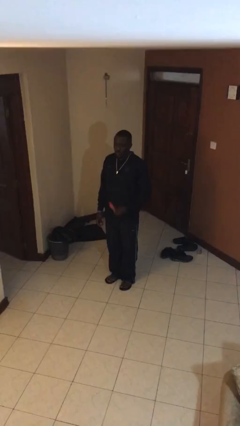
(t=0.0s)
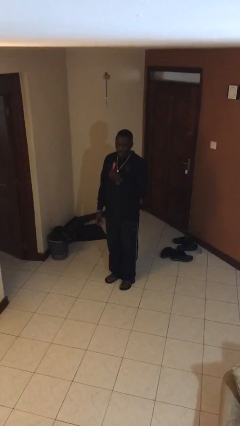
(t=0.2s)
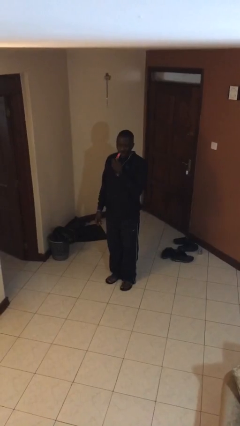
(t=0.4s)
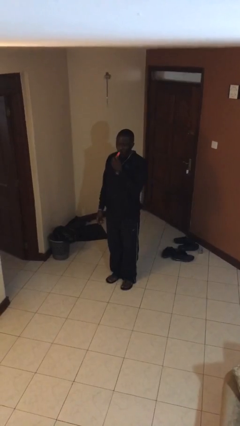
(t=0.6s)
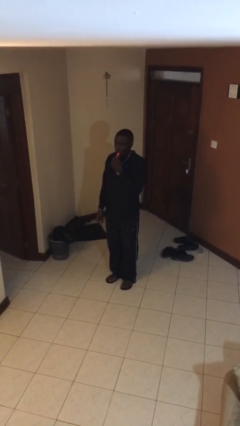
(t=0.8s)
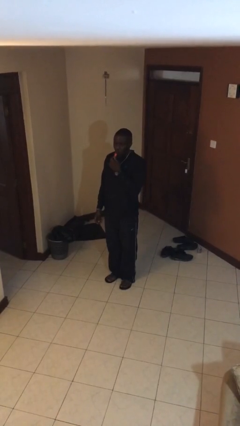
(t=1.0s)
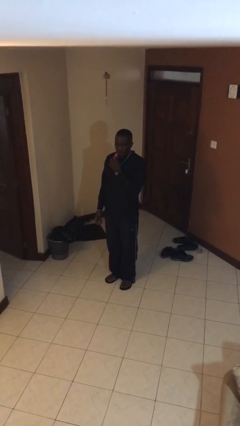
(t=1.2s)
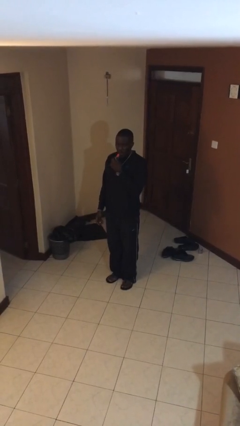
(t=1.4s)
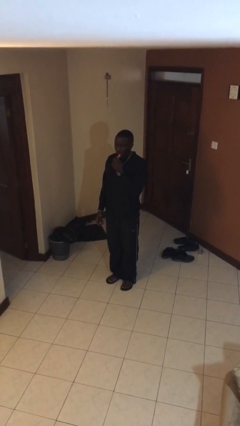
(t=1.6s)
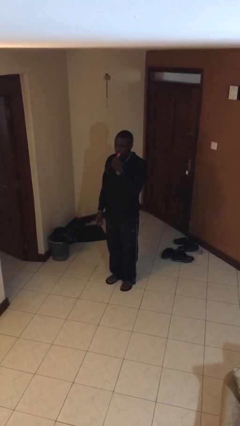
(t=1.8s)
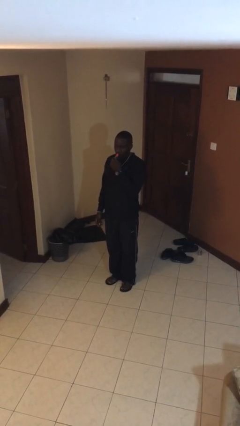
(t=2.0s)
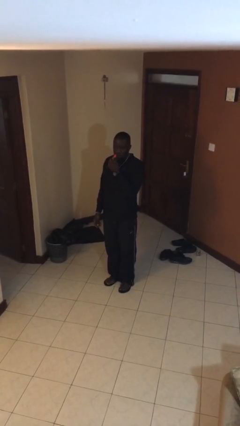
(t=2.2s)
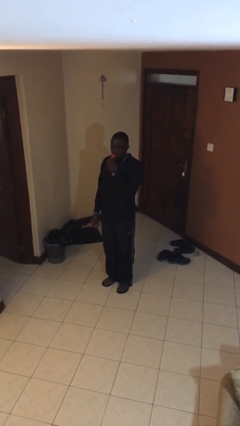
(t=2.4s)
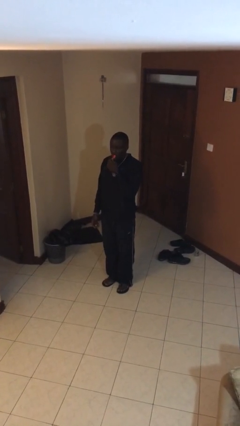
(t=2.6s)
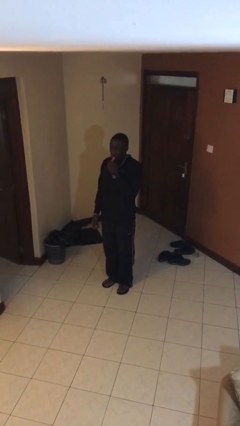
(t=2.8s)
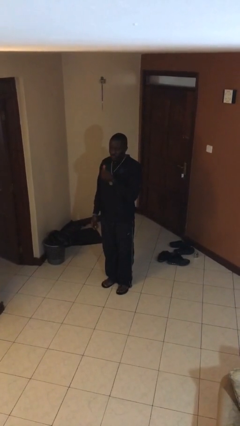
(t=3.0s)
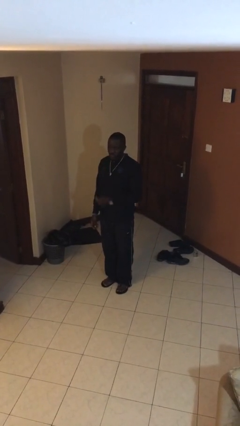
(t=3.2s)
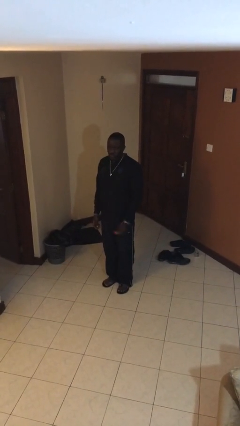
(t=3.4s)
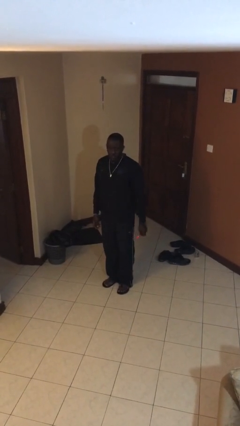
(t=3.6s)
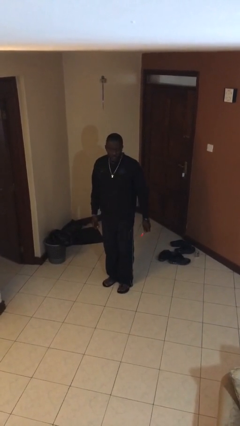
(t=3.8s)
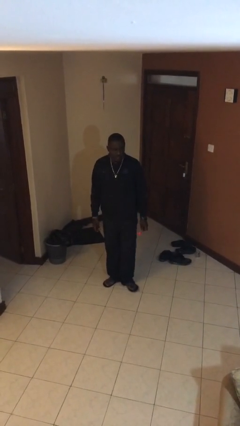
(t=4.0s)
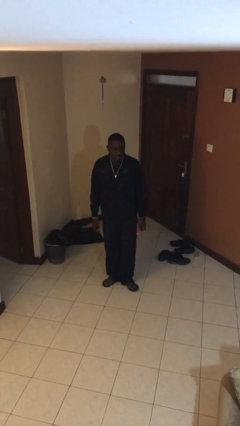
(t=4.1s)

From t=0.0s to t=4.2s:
person applies lip makeup

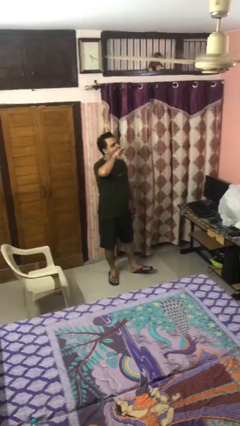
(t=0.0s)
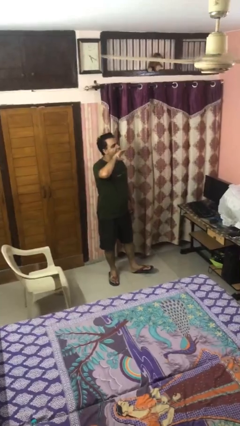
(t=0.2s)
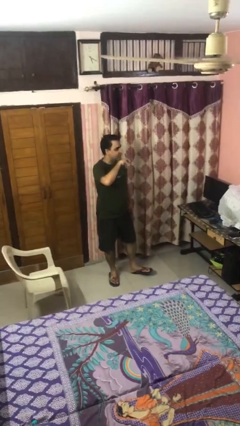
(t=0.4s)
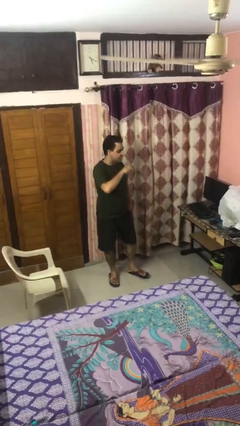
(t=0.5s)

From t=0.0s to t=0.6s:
person yawns

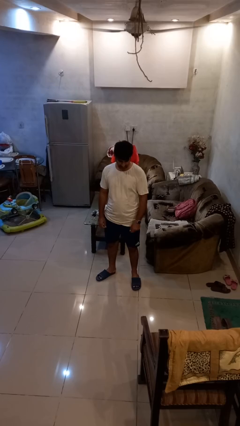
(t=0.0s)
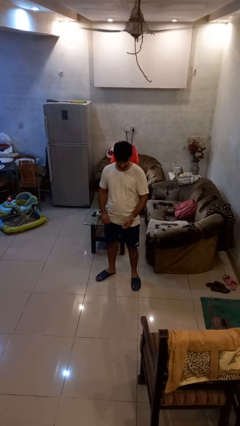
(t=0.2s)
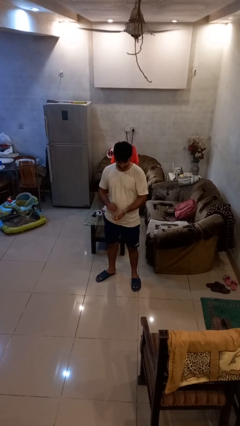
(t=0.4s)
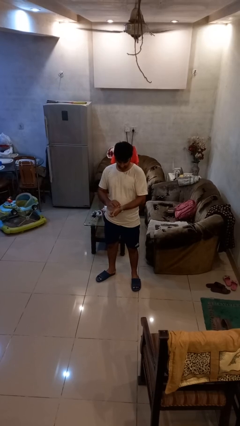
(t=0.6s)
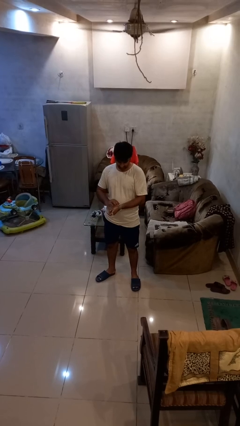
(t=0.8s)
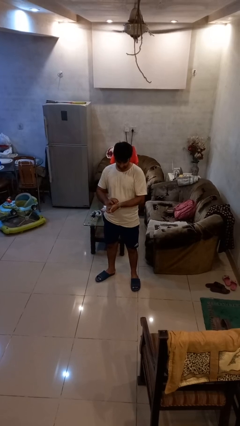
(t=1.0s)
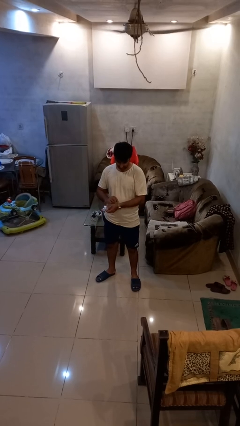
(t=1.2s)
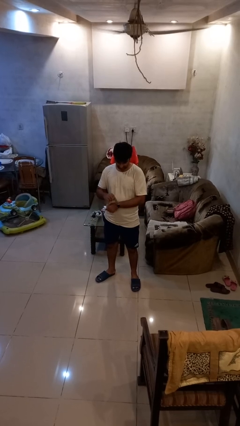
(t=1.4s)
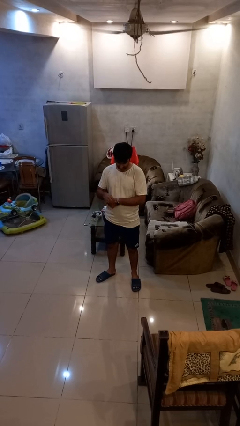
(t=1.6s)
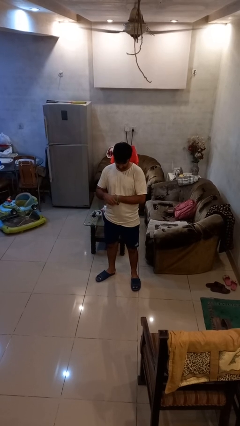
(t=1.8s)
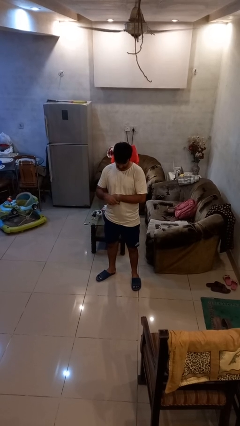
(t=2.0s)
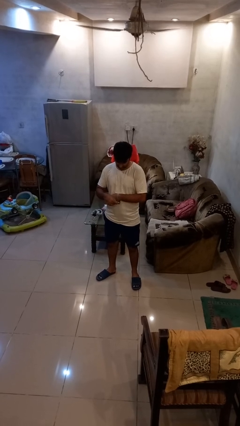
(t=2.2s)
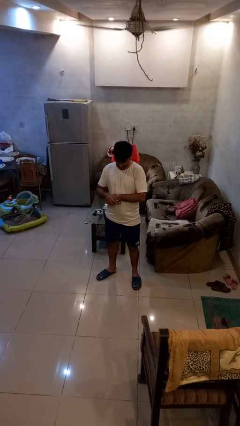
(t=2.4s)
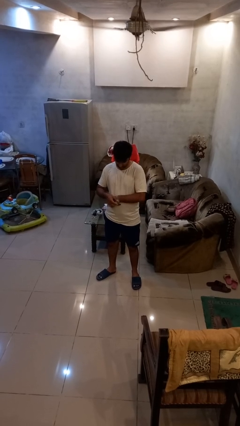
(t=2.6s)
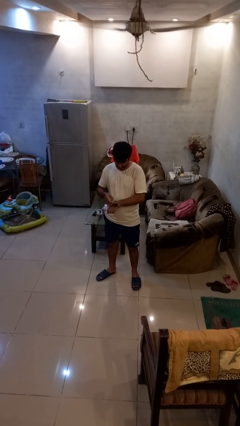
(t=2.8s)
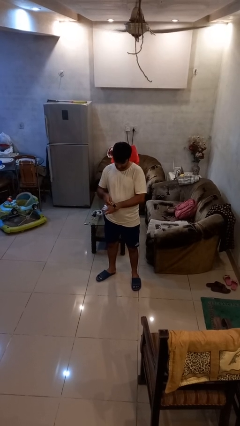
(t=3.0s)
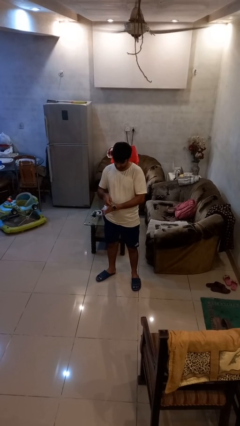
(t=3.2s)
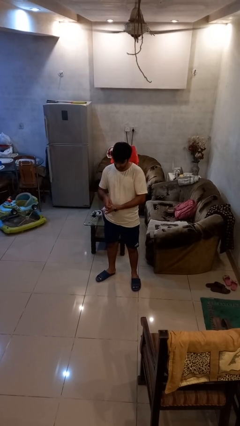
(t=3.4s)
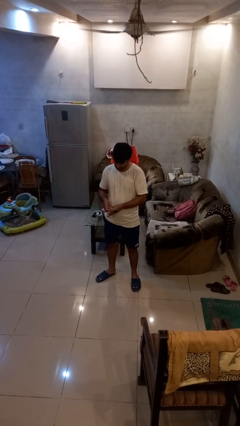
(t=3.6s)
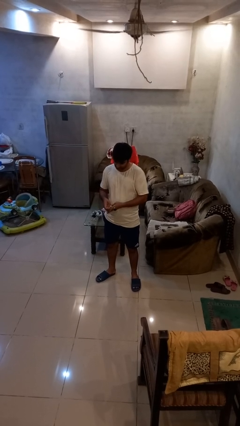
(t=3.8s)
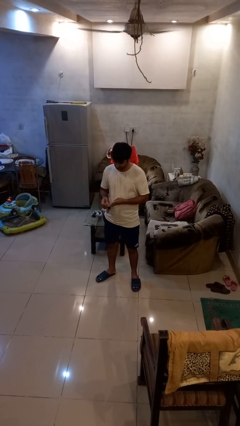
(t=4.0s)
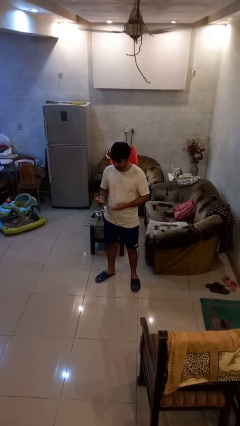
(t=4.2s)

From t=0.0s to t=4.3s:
person takes off wristwatch

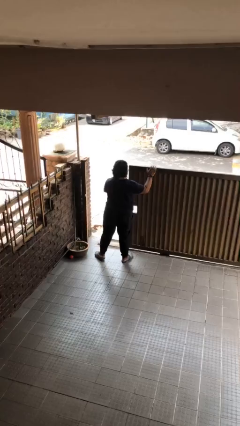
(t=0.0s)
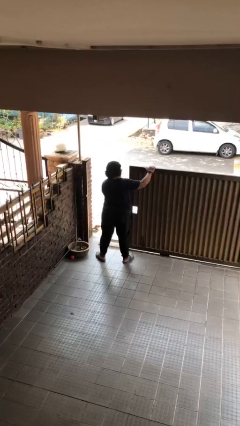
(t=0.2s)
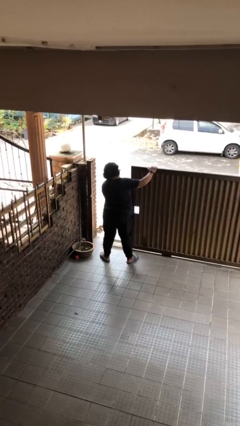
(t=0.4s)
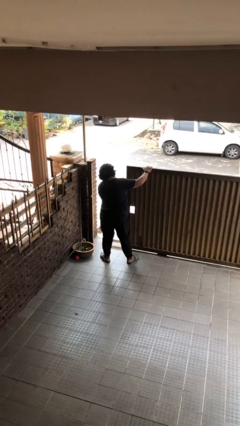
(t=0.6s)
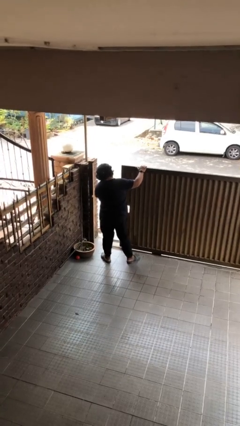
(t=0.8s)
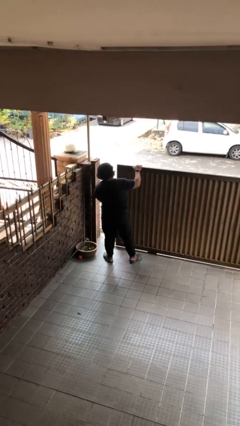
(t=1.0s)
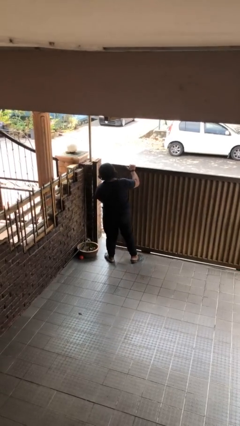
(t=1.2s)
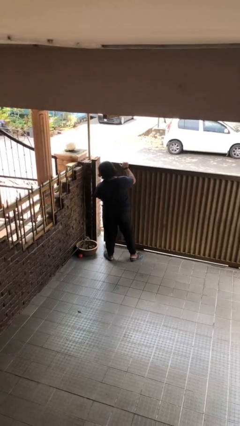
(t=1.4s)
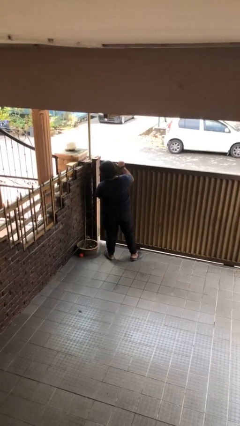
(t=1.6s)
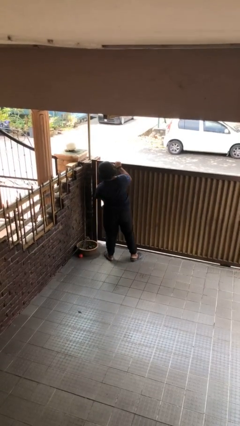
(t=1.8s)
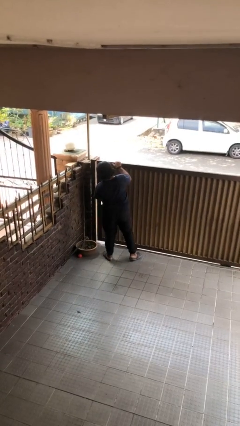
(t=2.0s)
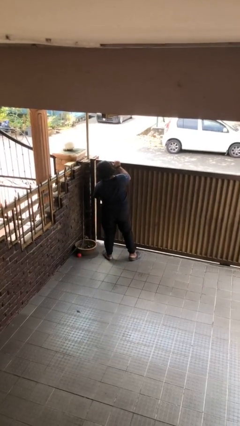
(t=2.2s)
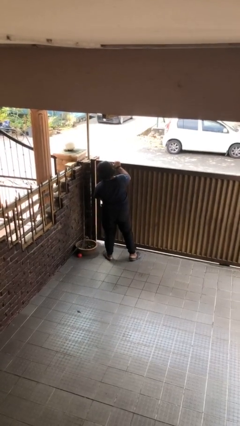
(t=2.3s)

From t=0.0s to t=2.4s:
person closes facility door

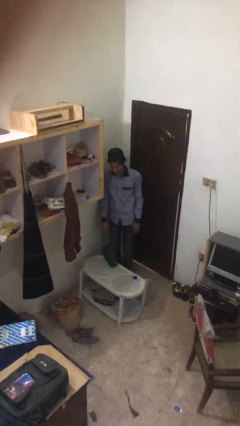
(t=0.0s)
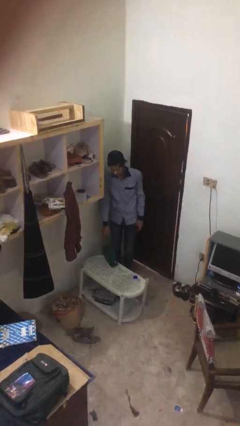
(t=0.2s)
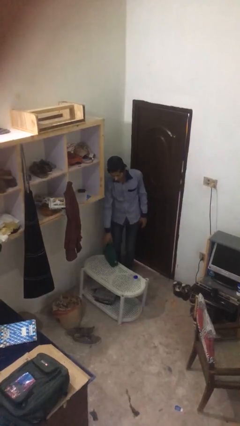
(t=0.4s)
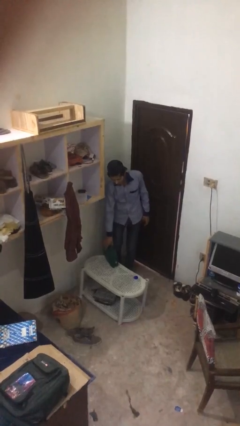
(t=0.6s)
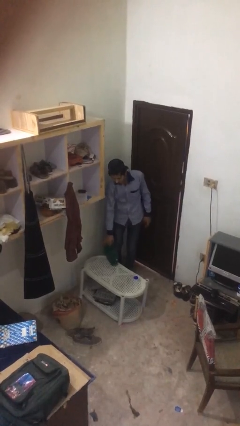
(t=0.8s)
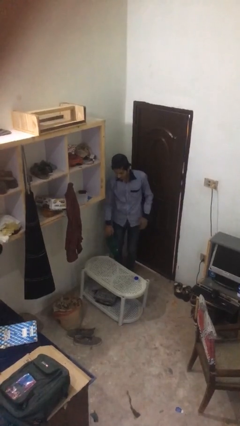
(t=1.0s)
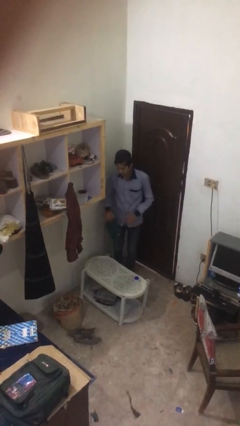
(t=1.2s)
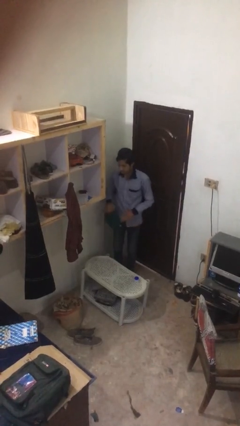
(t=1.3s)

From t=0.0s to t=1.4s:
person picks up object from table

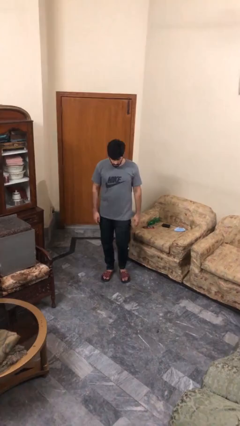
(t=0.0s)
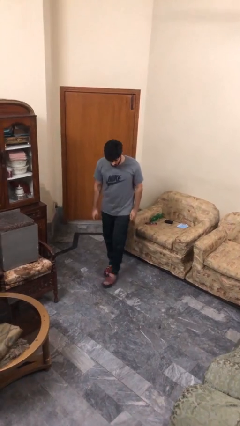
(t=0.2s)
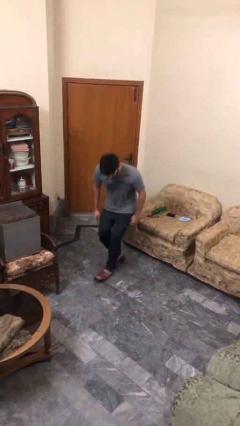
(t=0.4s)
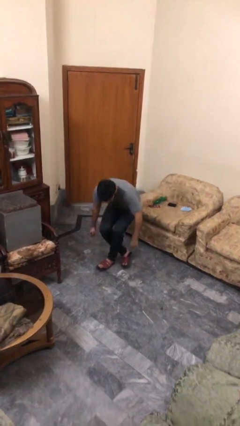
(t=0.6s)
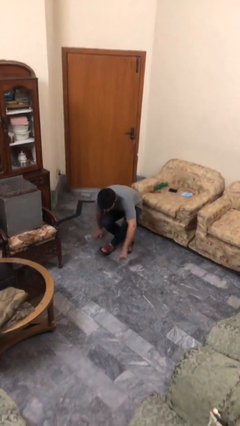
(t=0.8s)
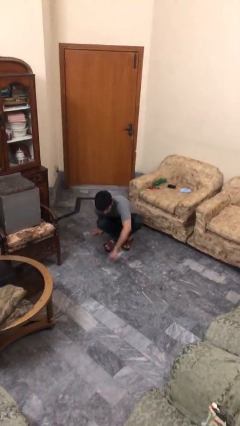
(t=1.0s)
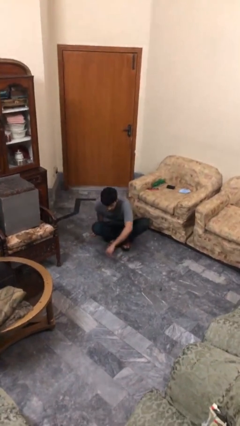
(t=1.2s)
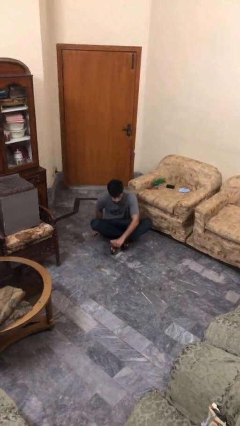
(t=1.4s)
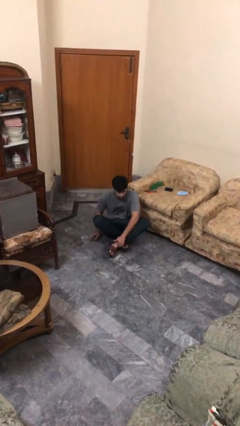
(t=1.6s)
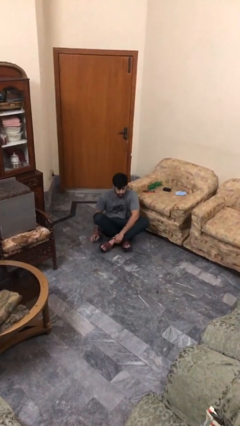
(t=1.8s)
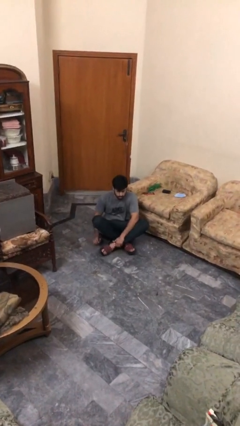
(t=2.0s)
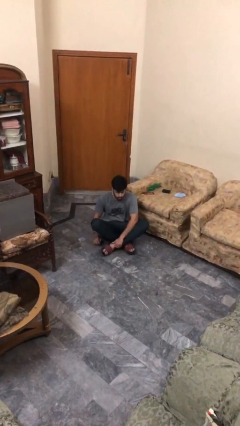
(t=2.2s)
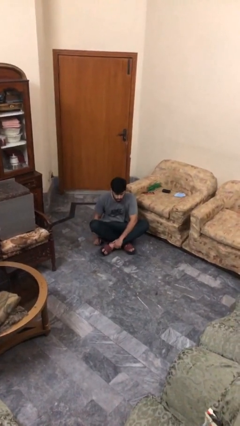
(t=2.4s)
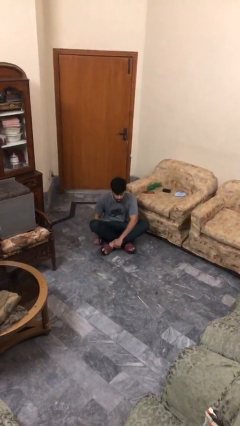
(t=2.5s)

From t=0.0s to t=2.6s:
person sits crisscross

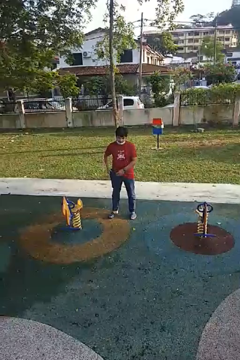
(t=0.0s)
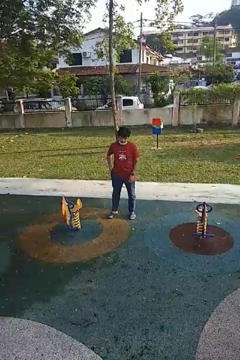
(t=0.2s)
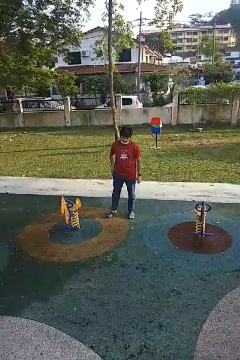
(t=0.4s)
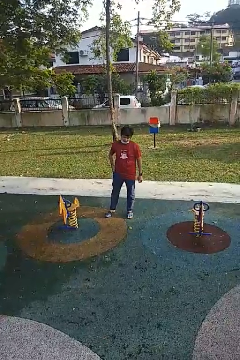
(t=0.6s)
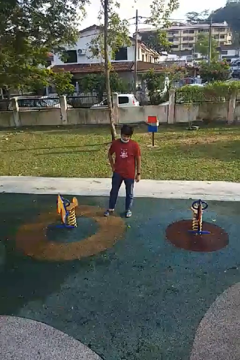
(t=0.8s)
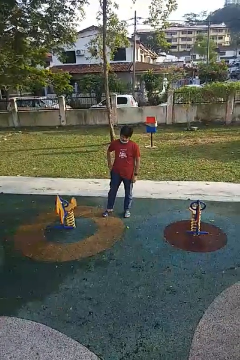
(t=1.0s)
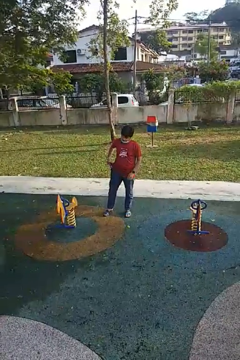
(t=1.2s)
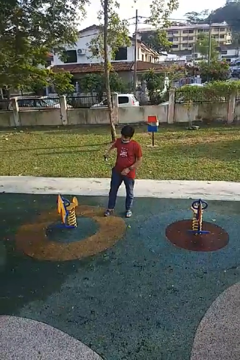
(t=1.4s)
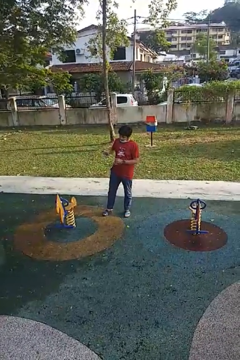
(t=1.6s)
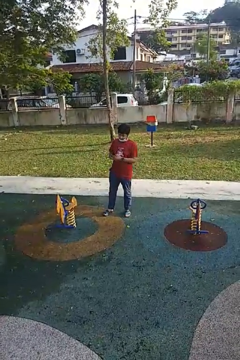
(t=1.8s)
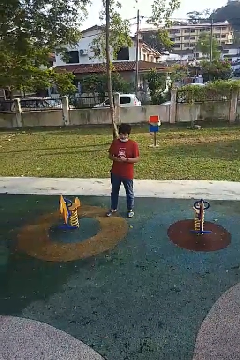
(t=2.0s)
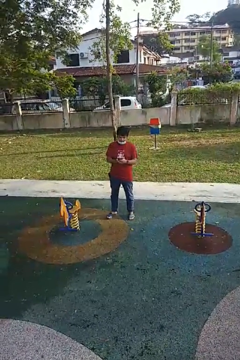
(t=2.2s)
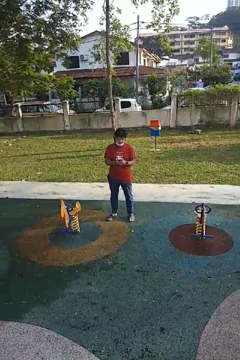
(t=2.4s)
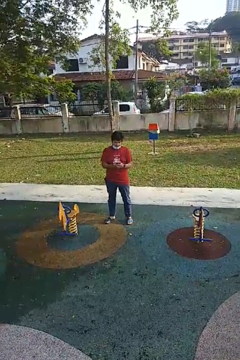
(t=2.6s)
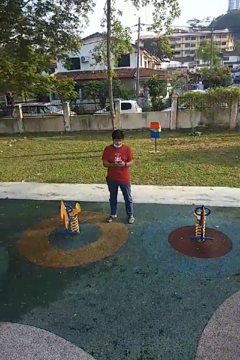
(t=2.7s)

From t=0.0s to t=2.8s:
person takes phone from pocket
